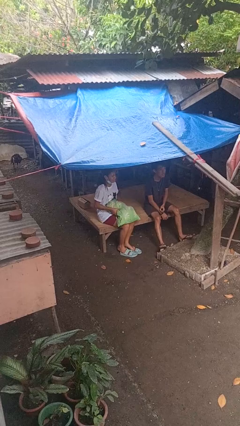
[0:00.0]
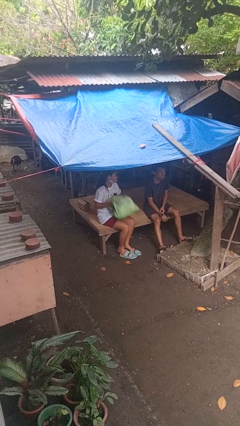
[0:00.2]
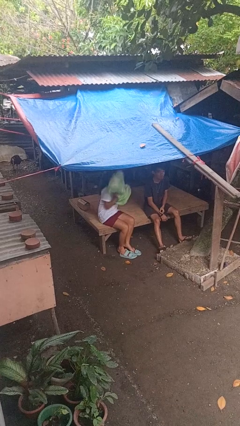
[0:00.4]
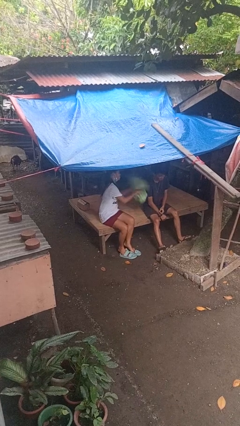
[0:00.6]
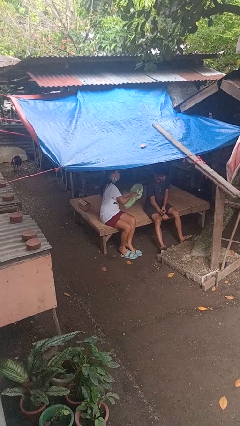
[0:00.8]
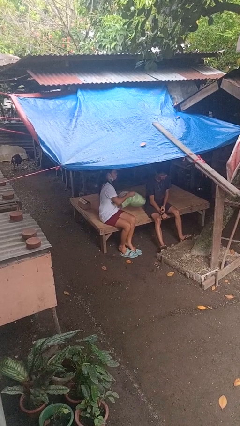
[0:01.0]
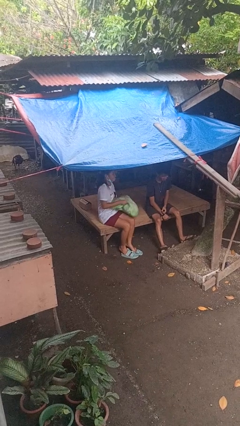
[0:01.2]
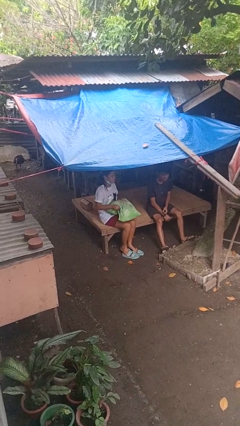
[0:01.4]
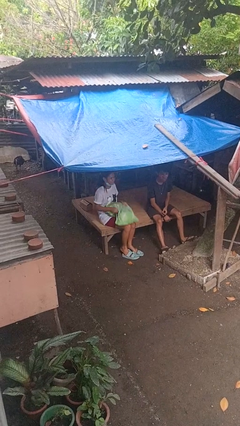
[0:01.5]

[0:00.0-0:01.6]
person hits person with pillow

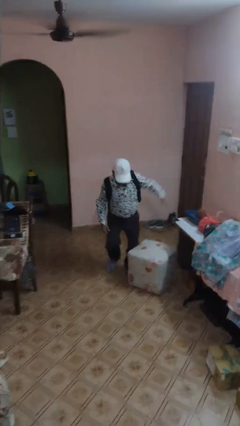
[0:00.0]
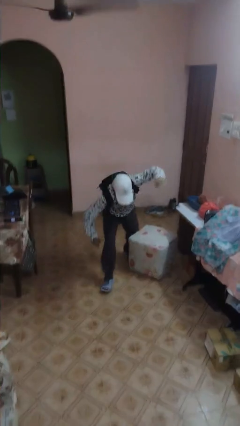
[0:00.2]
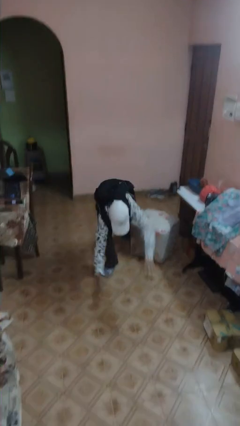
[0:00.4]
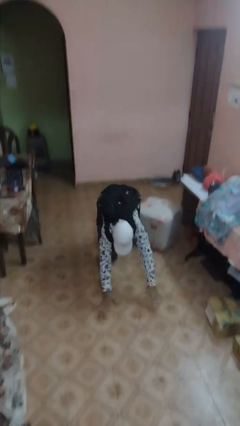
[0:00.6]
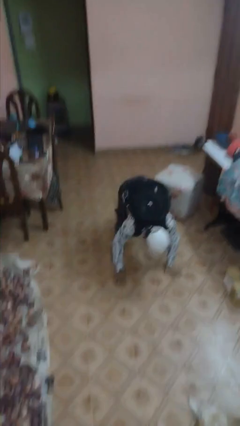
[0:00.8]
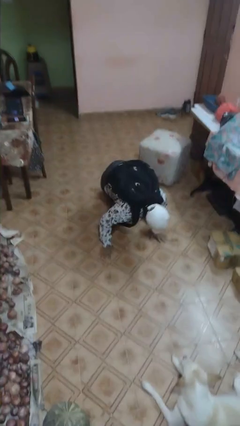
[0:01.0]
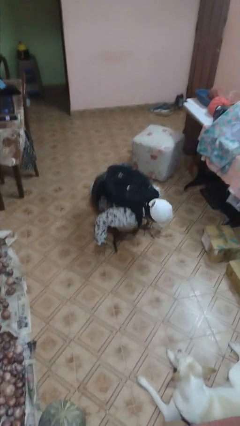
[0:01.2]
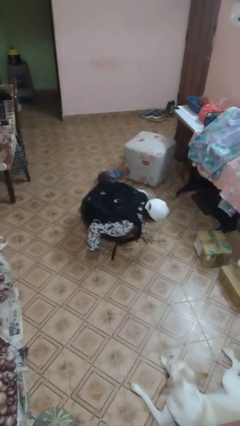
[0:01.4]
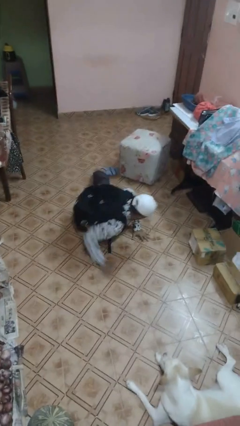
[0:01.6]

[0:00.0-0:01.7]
person trips on object on floor

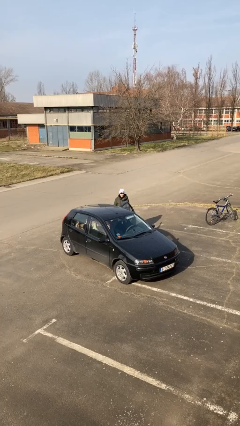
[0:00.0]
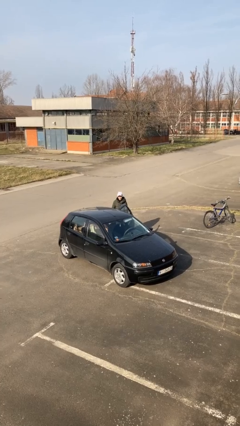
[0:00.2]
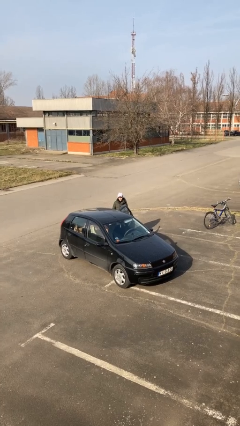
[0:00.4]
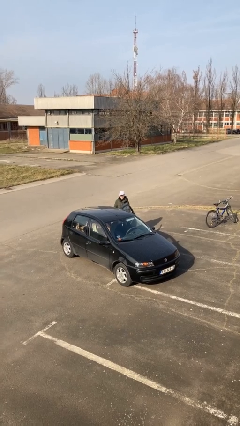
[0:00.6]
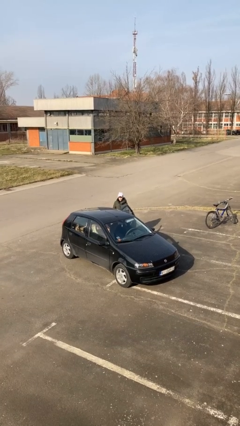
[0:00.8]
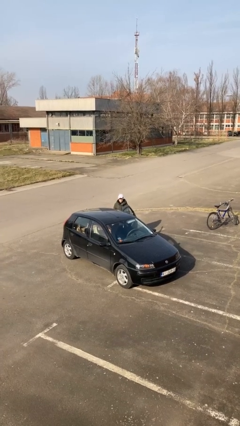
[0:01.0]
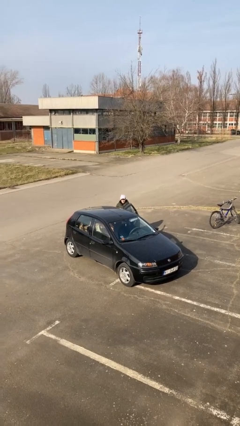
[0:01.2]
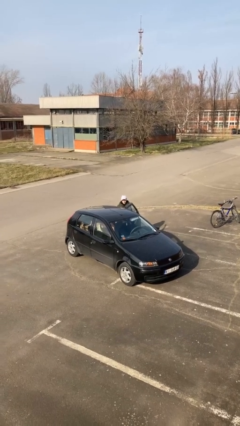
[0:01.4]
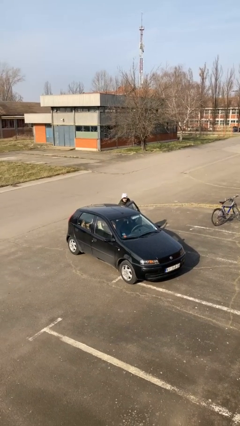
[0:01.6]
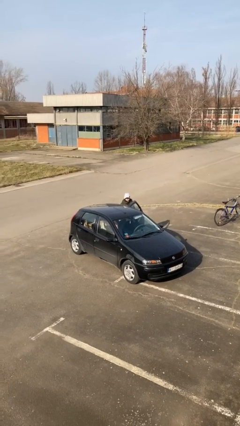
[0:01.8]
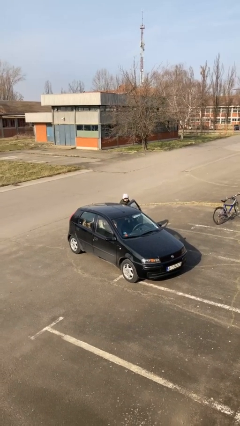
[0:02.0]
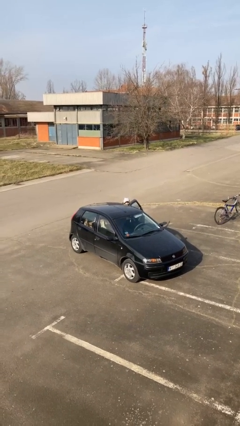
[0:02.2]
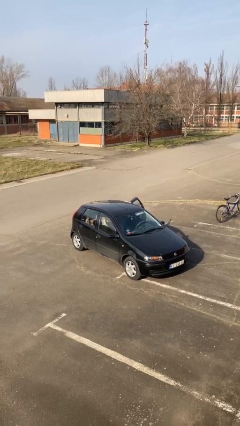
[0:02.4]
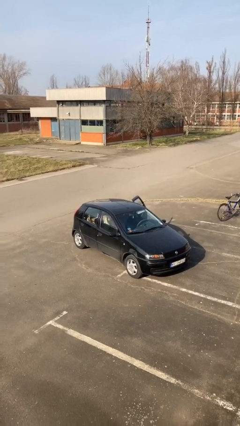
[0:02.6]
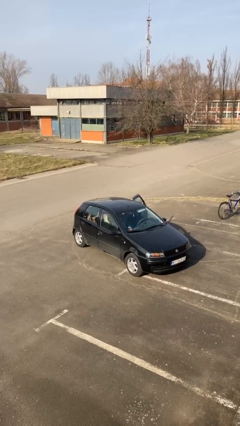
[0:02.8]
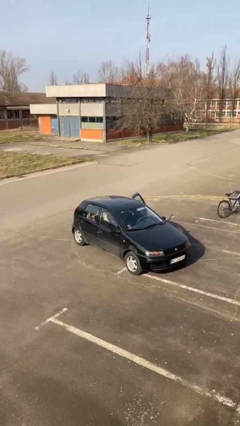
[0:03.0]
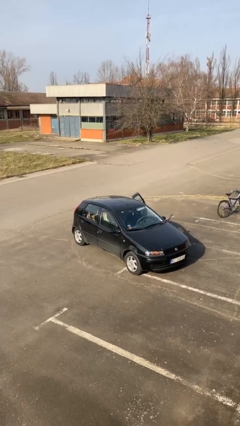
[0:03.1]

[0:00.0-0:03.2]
person enters car

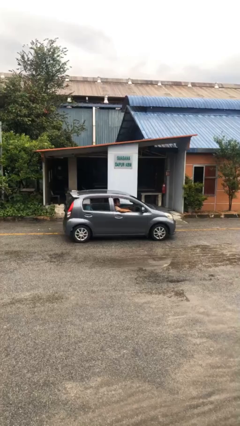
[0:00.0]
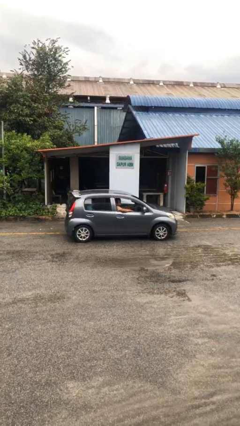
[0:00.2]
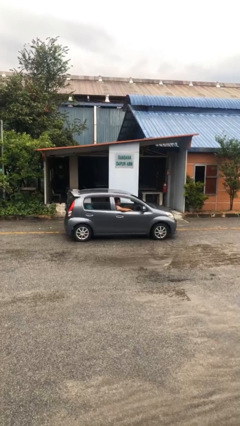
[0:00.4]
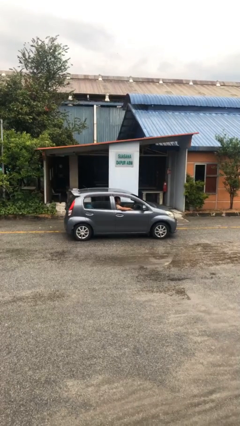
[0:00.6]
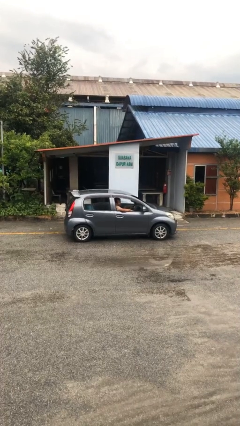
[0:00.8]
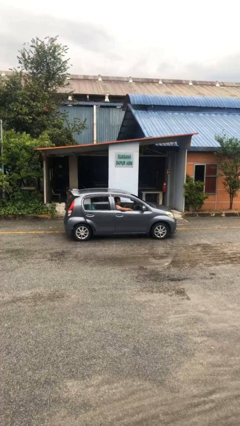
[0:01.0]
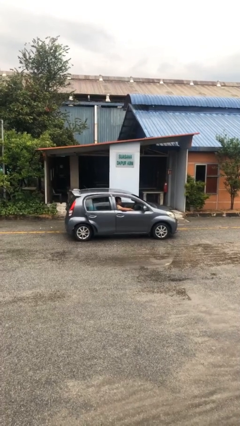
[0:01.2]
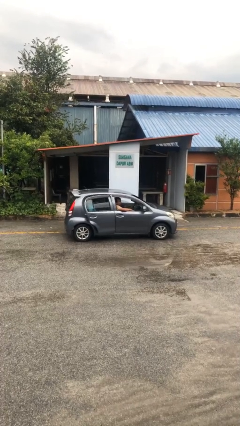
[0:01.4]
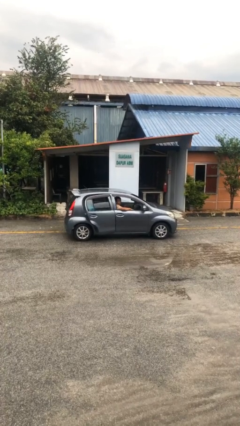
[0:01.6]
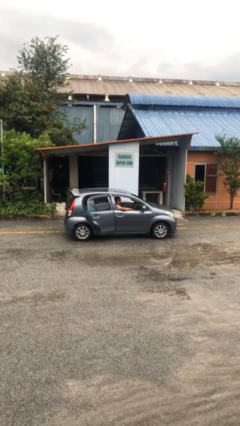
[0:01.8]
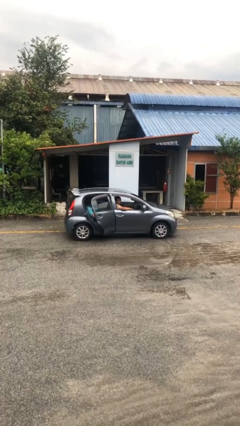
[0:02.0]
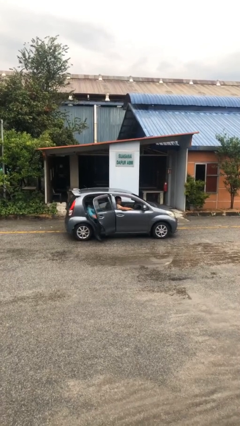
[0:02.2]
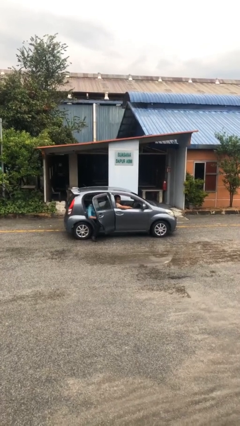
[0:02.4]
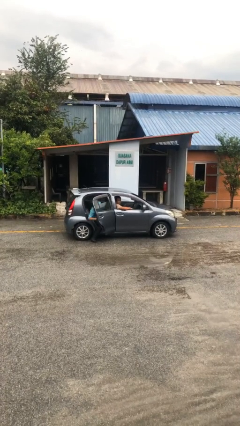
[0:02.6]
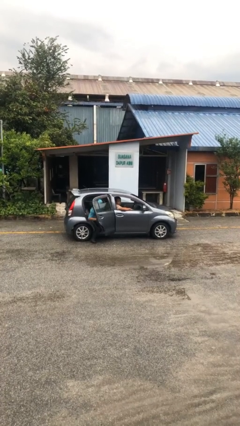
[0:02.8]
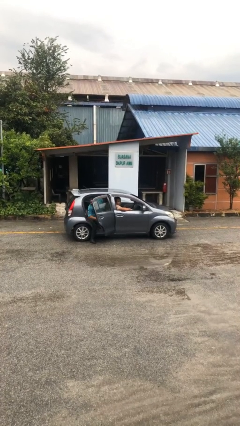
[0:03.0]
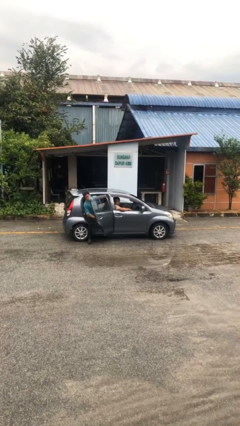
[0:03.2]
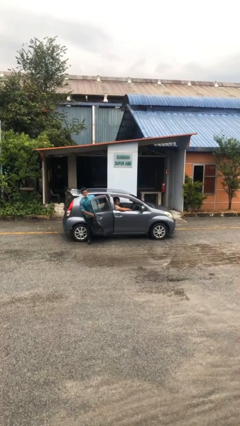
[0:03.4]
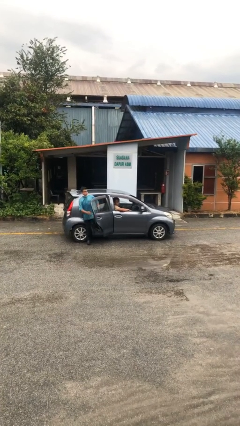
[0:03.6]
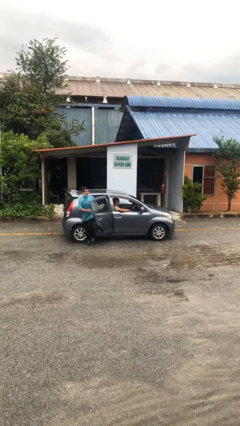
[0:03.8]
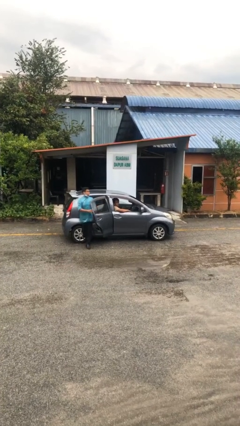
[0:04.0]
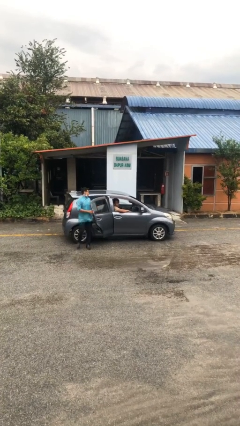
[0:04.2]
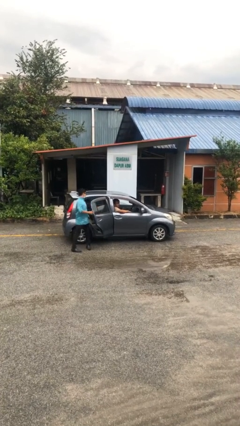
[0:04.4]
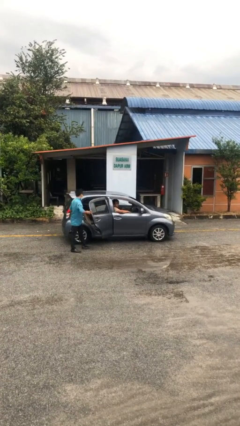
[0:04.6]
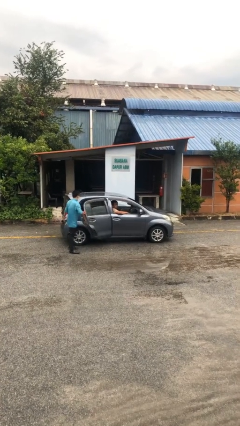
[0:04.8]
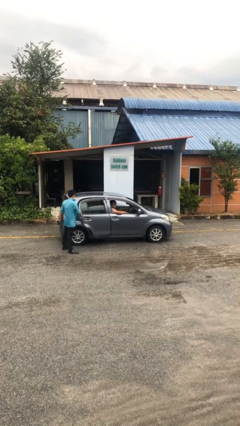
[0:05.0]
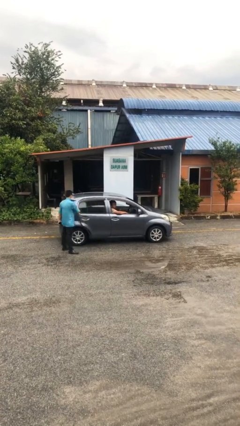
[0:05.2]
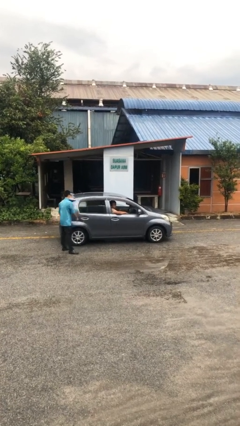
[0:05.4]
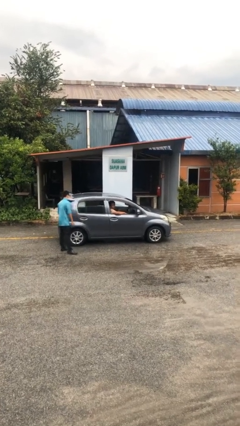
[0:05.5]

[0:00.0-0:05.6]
car drops off person

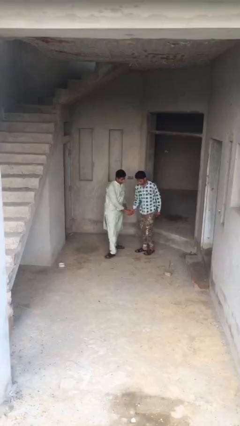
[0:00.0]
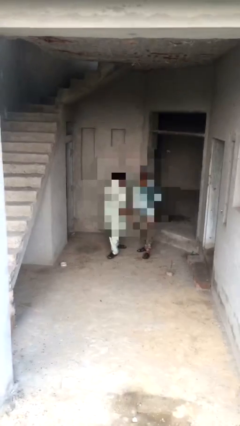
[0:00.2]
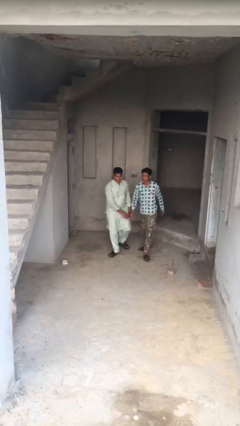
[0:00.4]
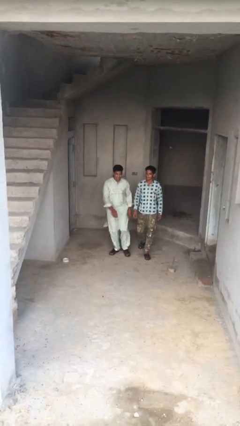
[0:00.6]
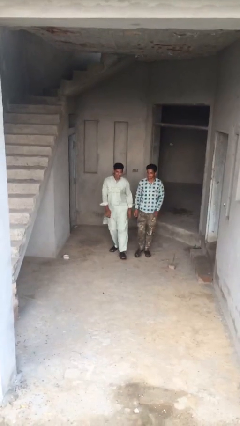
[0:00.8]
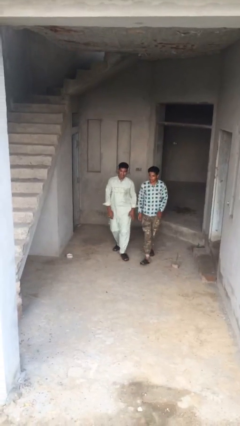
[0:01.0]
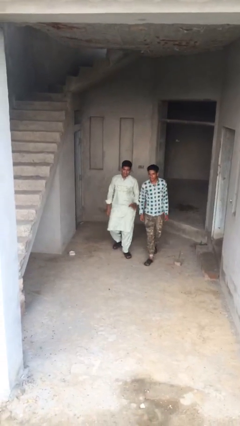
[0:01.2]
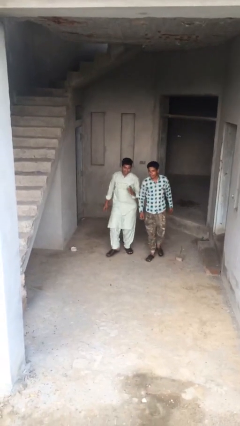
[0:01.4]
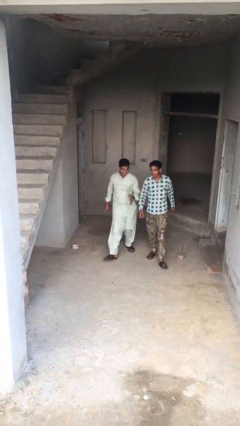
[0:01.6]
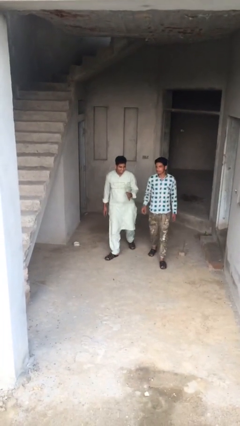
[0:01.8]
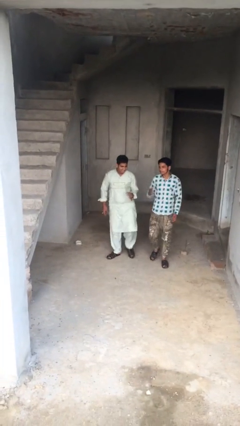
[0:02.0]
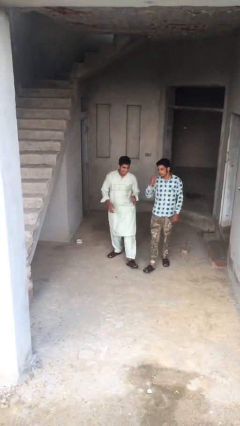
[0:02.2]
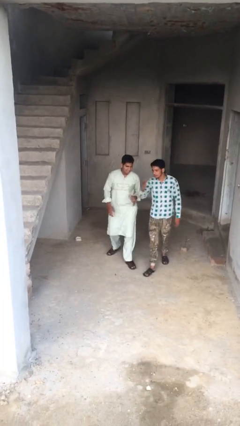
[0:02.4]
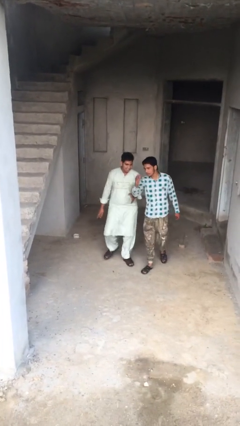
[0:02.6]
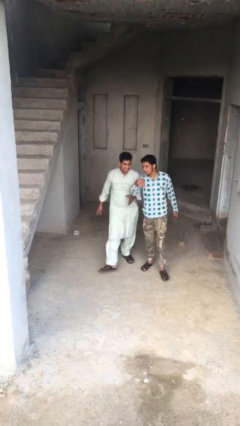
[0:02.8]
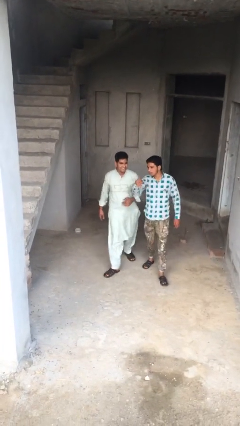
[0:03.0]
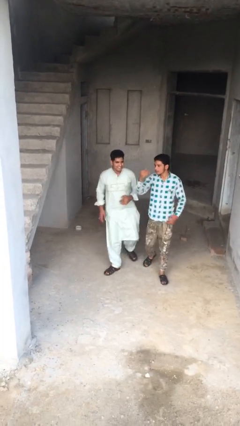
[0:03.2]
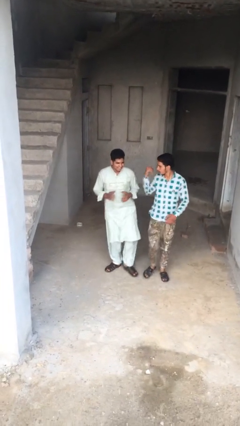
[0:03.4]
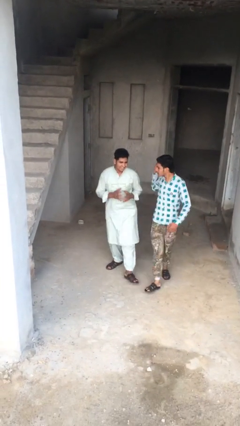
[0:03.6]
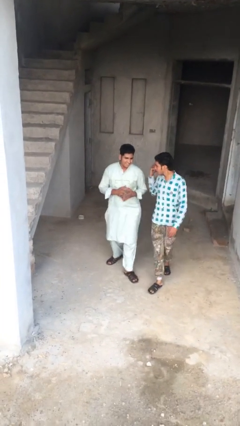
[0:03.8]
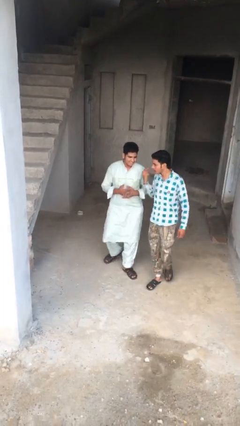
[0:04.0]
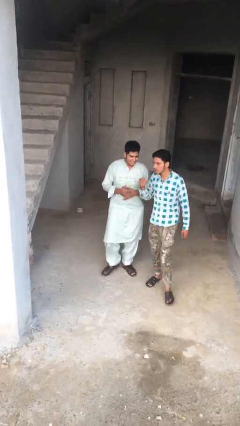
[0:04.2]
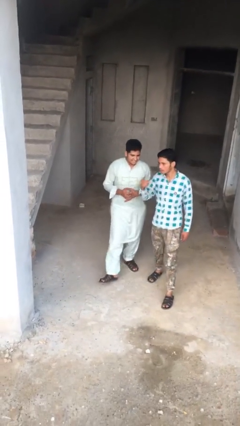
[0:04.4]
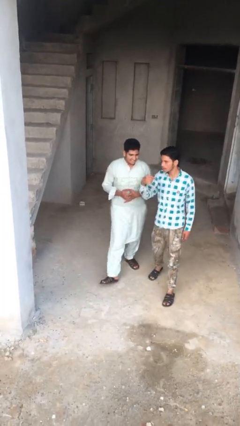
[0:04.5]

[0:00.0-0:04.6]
person talks to person

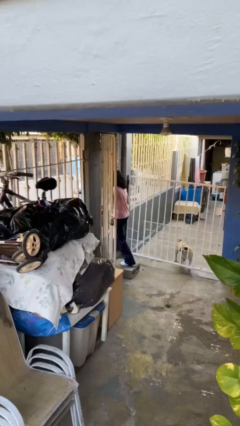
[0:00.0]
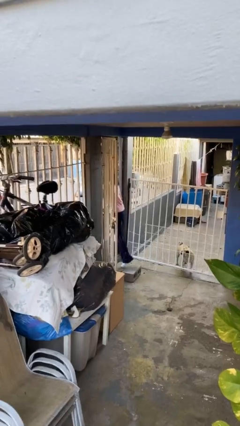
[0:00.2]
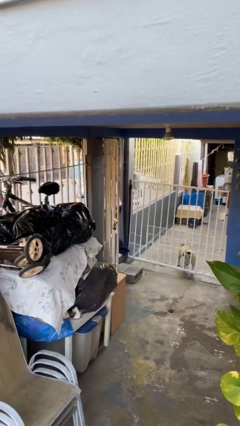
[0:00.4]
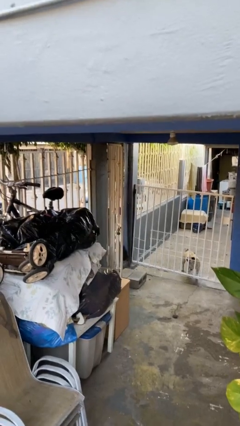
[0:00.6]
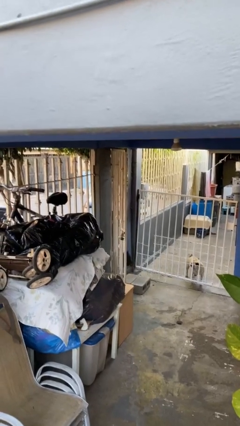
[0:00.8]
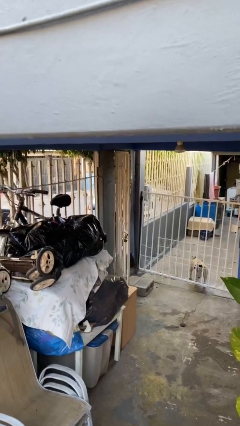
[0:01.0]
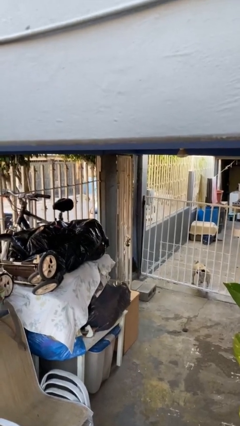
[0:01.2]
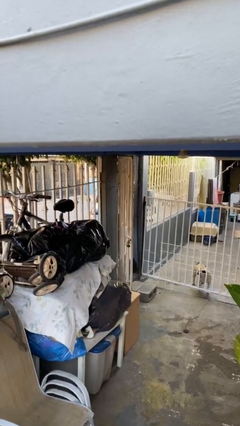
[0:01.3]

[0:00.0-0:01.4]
person exits scene through structure
